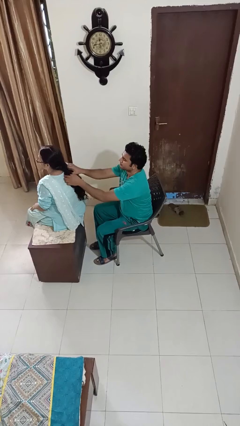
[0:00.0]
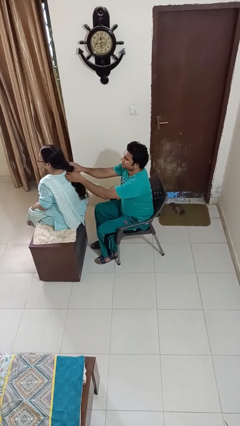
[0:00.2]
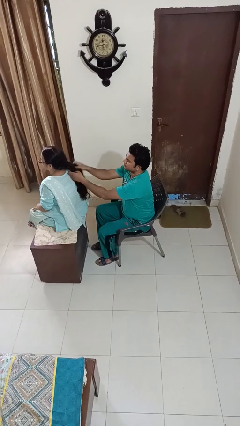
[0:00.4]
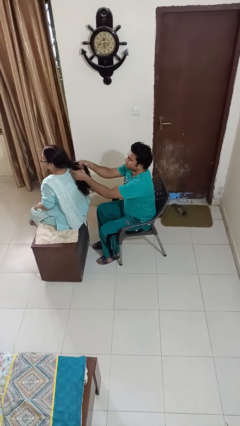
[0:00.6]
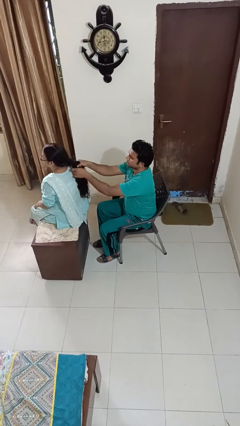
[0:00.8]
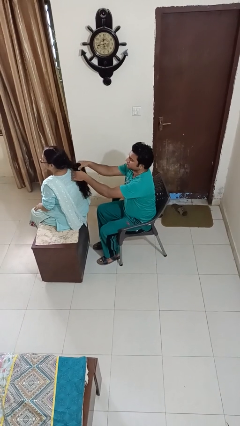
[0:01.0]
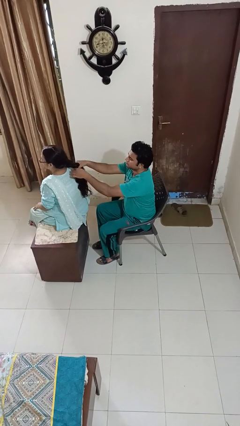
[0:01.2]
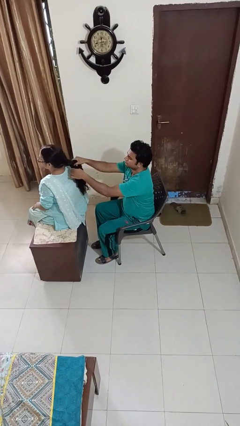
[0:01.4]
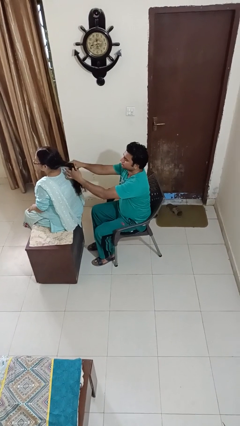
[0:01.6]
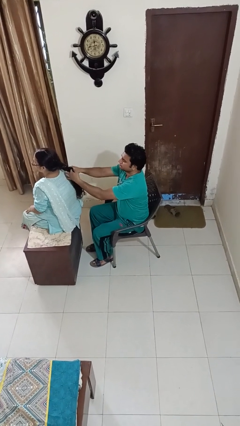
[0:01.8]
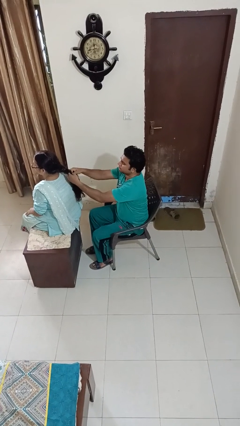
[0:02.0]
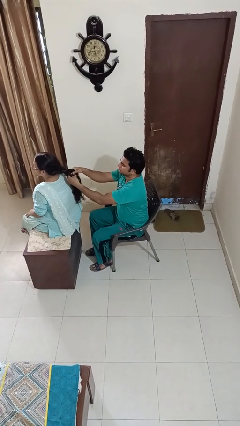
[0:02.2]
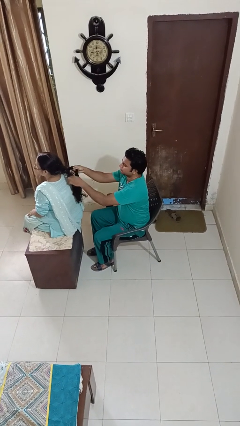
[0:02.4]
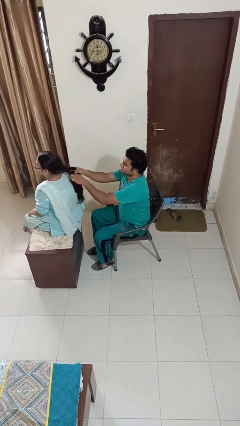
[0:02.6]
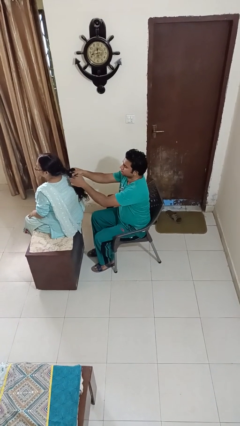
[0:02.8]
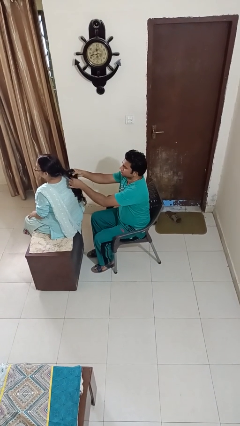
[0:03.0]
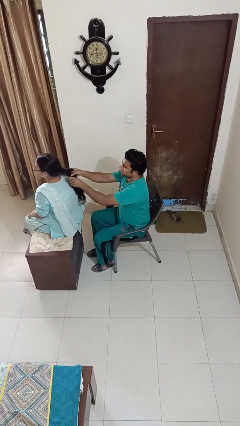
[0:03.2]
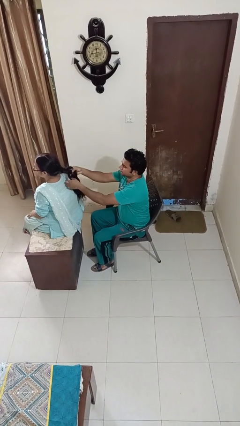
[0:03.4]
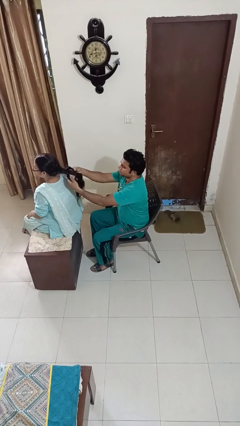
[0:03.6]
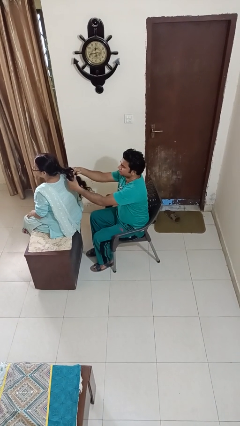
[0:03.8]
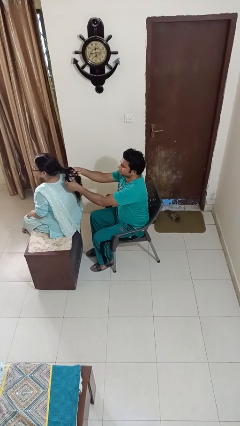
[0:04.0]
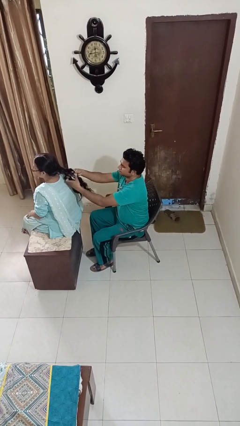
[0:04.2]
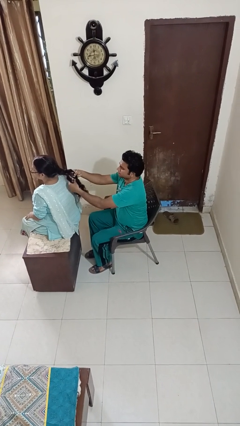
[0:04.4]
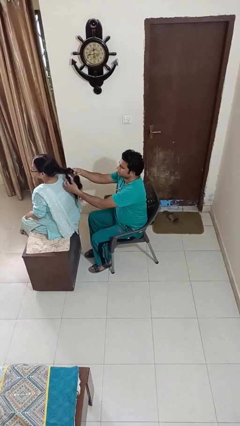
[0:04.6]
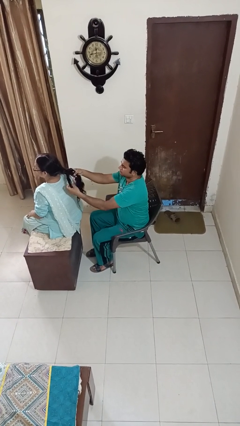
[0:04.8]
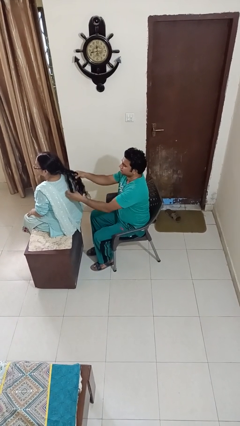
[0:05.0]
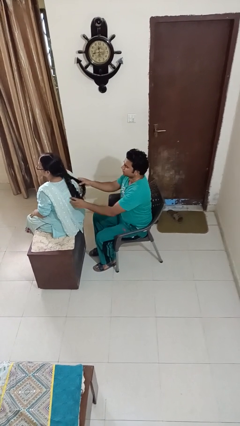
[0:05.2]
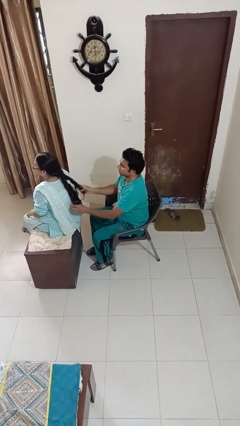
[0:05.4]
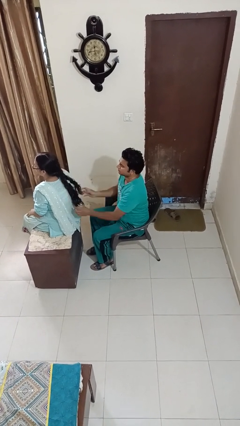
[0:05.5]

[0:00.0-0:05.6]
person braids hair of person

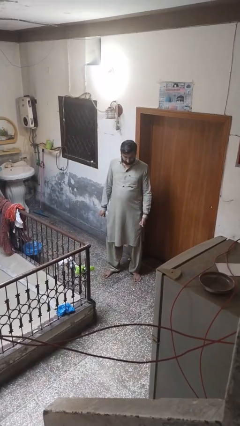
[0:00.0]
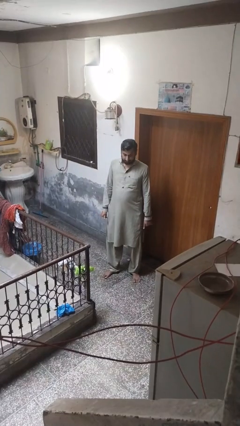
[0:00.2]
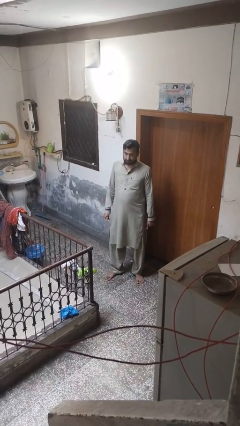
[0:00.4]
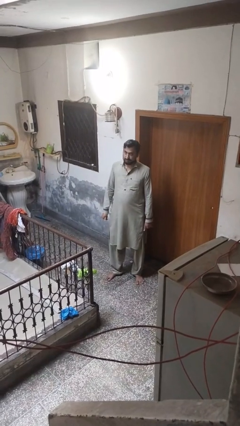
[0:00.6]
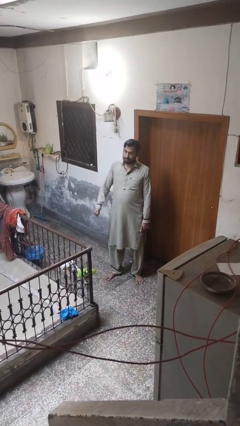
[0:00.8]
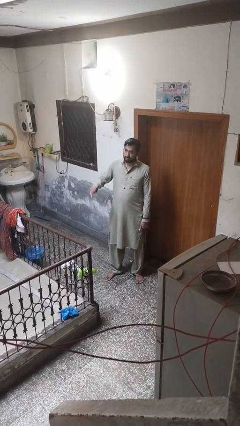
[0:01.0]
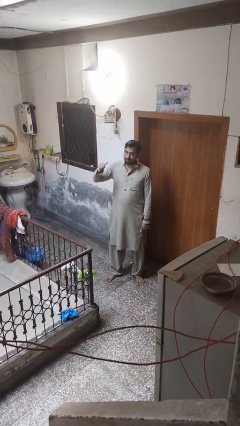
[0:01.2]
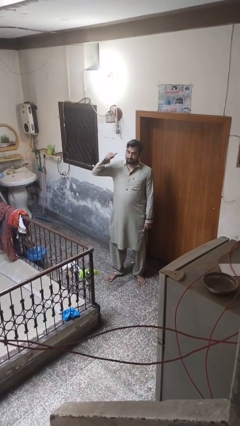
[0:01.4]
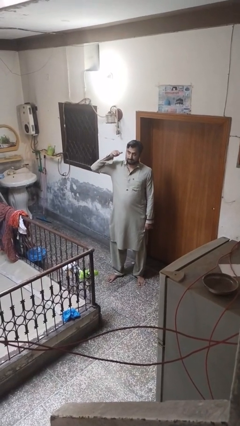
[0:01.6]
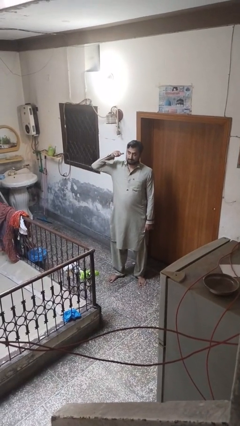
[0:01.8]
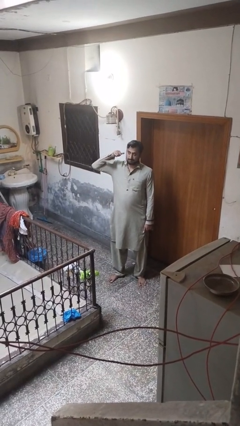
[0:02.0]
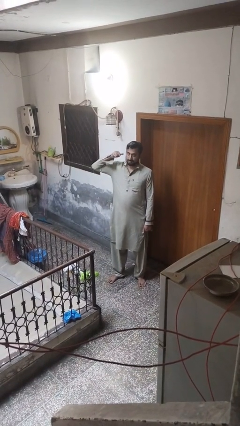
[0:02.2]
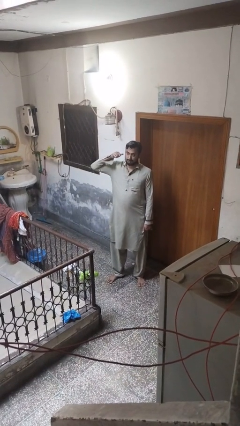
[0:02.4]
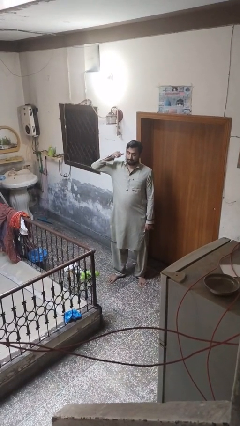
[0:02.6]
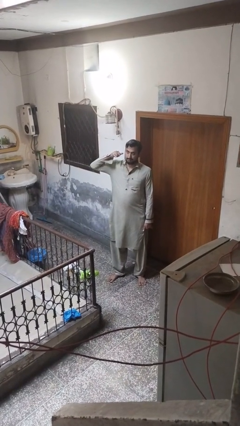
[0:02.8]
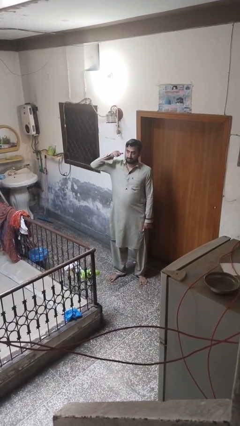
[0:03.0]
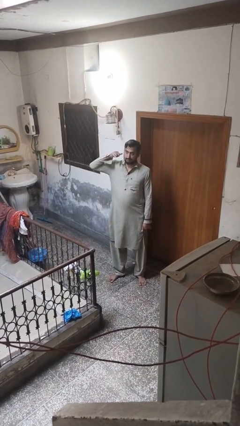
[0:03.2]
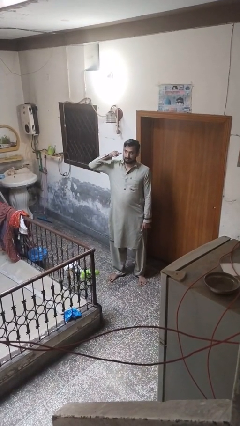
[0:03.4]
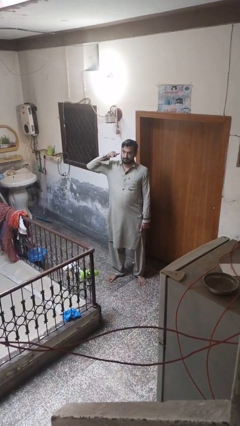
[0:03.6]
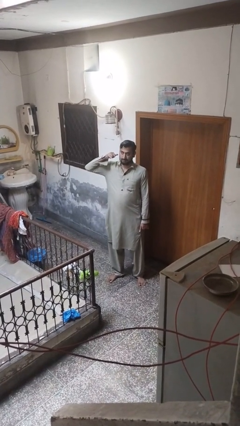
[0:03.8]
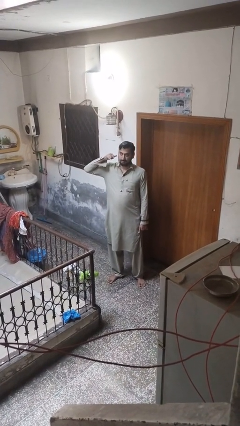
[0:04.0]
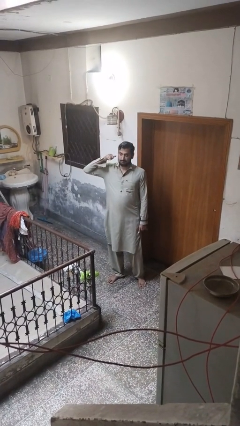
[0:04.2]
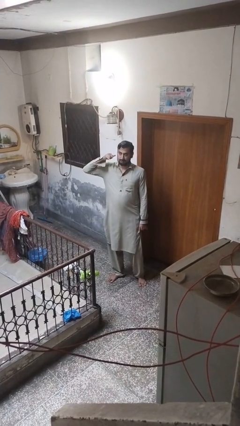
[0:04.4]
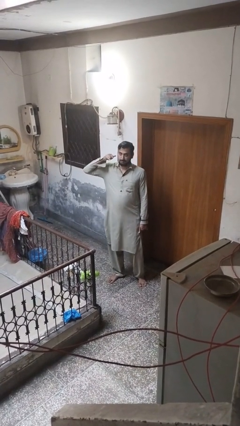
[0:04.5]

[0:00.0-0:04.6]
person gestures call me

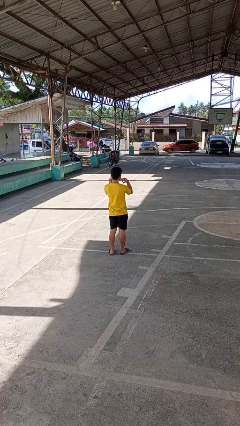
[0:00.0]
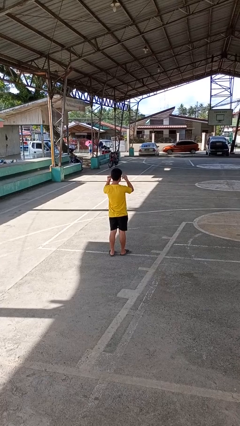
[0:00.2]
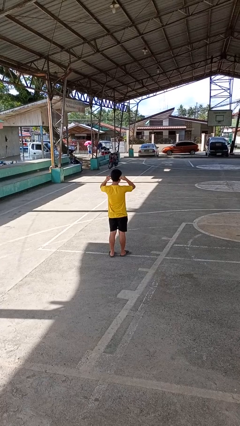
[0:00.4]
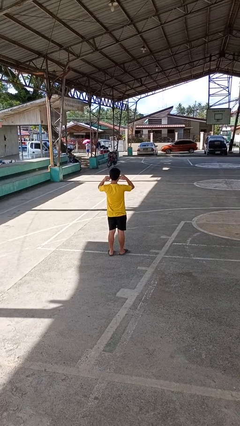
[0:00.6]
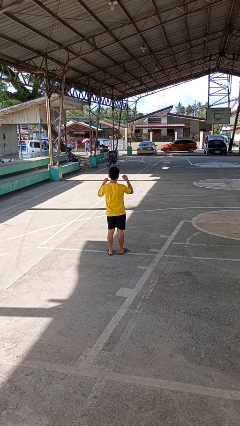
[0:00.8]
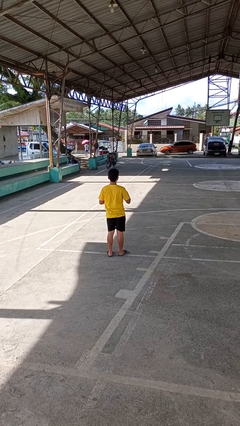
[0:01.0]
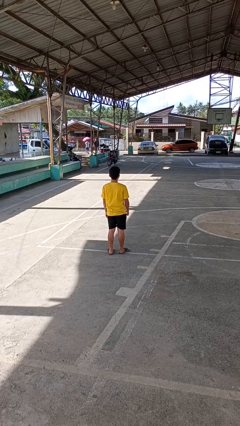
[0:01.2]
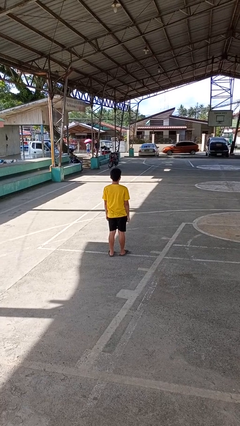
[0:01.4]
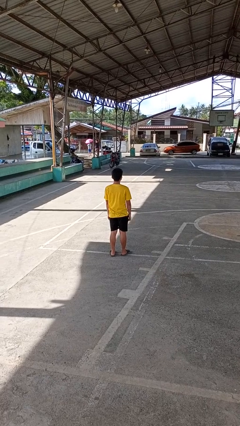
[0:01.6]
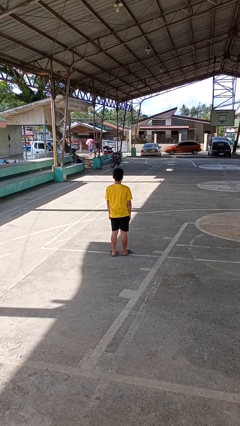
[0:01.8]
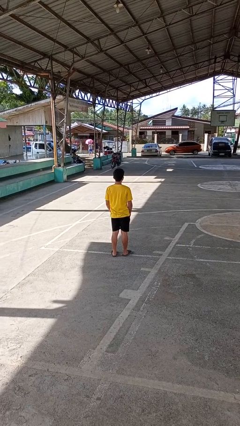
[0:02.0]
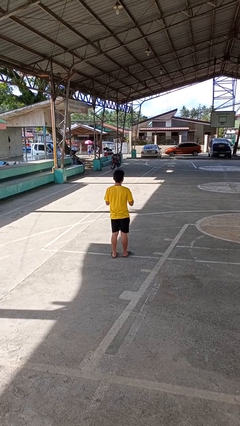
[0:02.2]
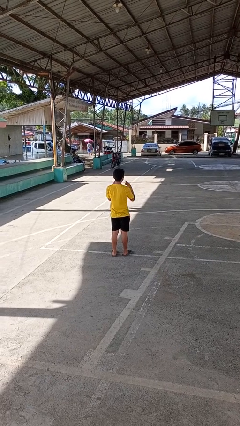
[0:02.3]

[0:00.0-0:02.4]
person puts on facemask

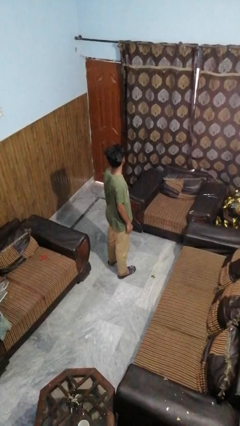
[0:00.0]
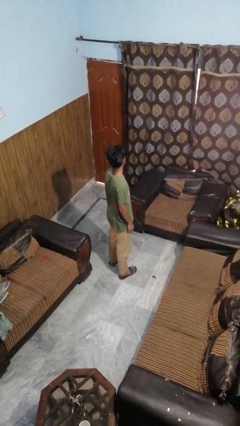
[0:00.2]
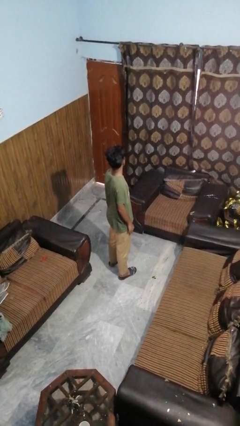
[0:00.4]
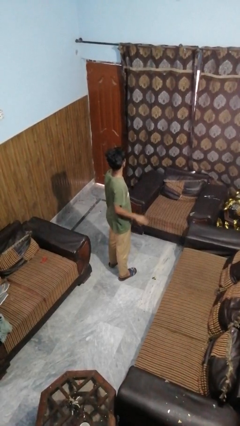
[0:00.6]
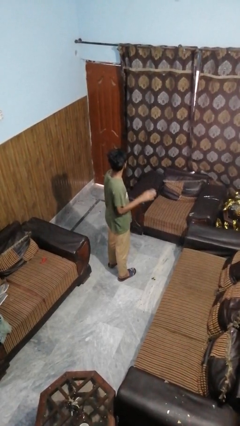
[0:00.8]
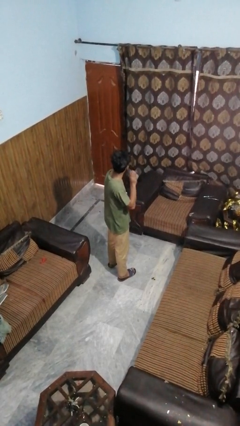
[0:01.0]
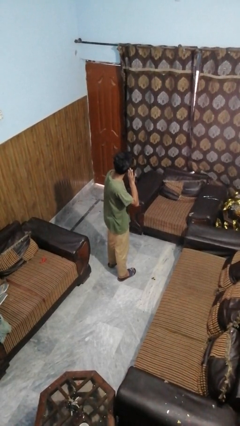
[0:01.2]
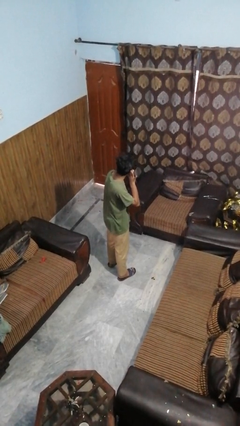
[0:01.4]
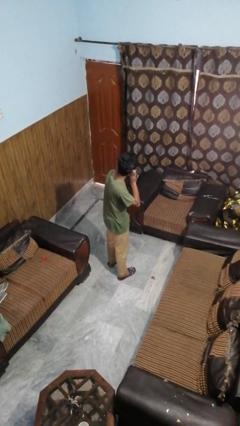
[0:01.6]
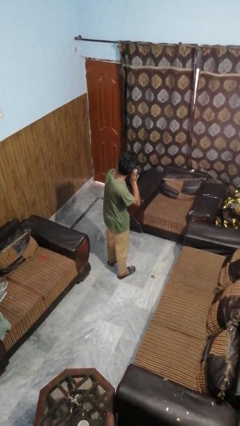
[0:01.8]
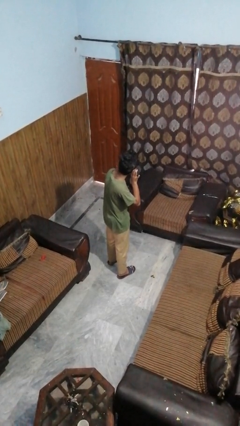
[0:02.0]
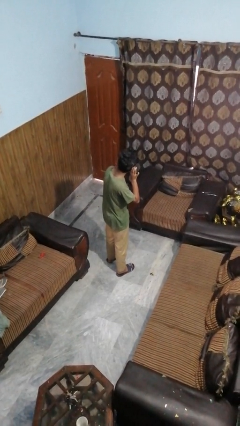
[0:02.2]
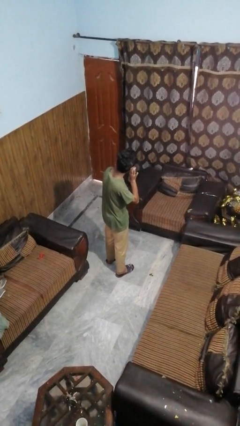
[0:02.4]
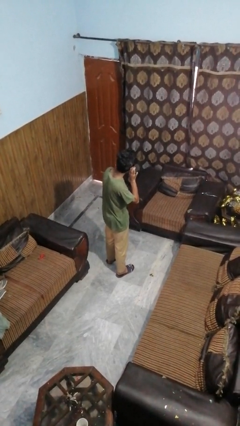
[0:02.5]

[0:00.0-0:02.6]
person gestures listen closely

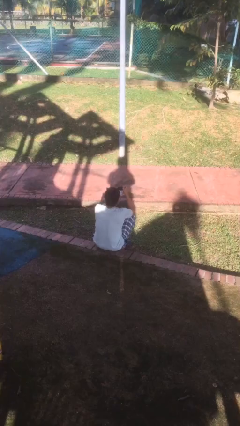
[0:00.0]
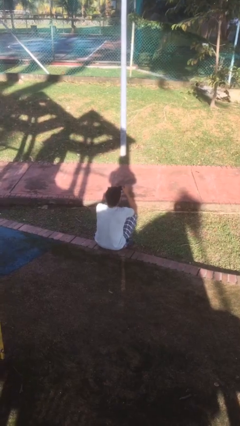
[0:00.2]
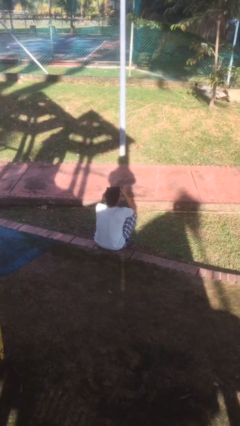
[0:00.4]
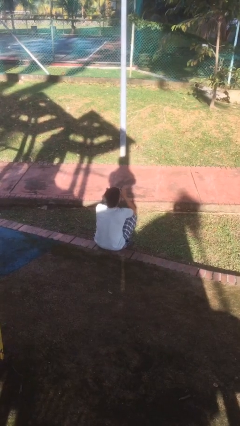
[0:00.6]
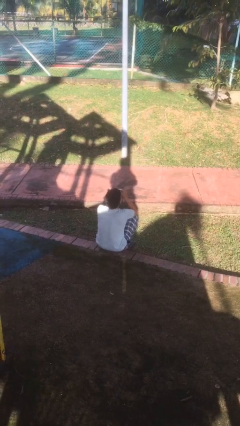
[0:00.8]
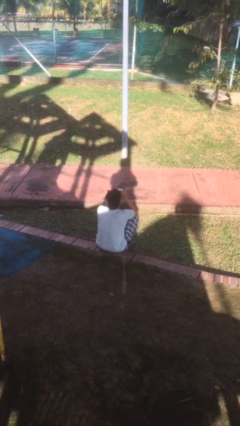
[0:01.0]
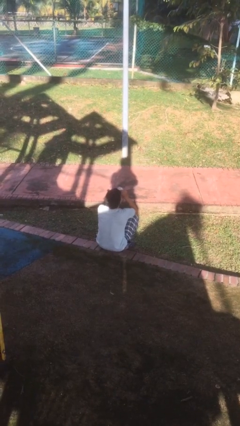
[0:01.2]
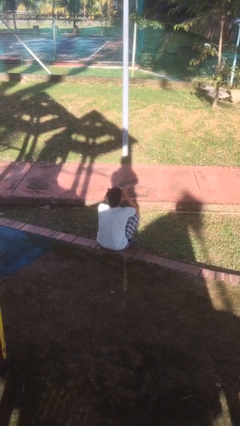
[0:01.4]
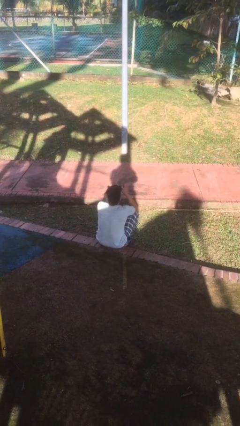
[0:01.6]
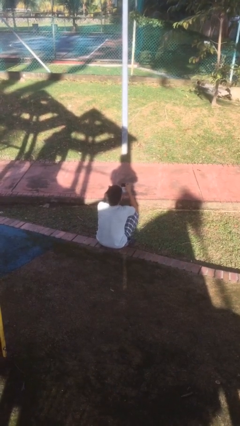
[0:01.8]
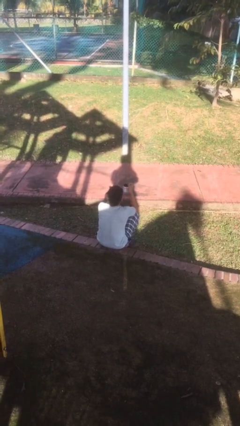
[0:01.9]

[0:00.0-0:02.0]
person drinks from mug

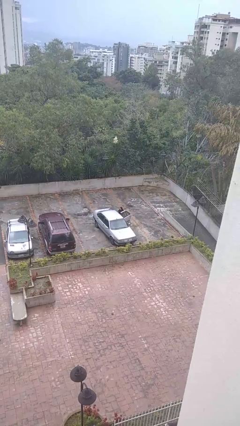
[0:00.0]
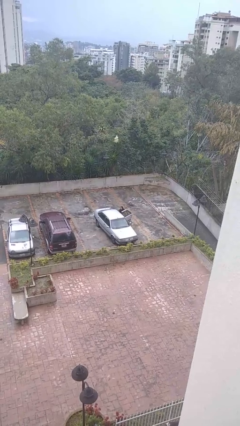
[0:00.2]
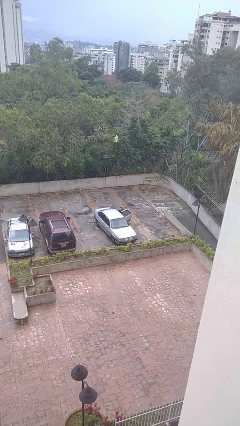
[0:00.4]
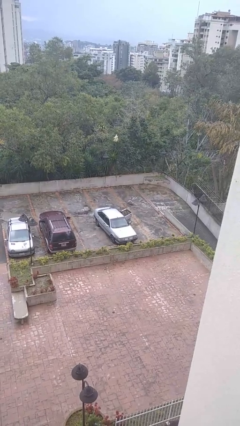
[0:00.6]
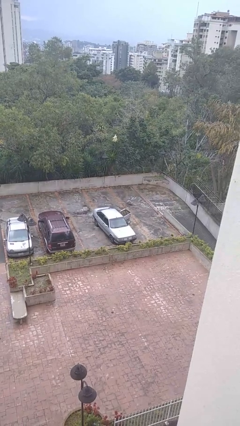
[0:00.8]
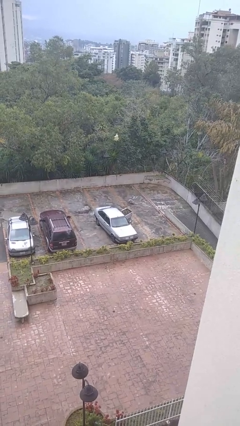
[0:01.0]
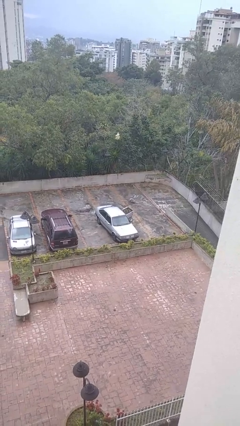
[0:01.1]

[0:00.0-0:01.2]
person enters car
